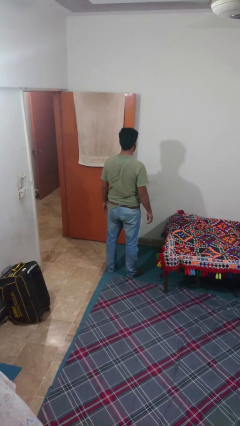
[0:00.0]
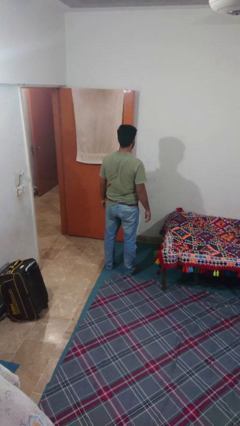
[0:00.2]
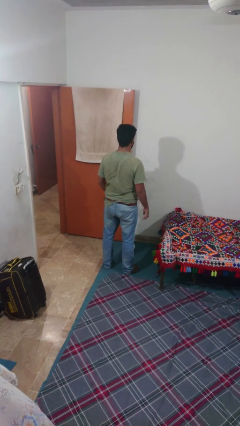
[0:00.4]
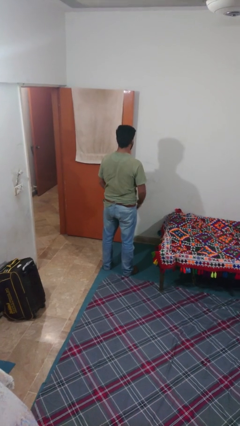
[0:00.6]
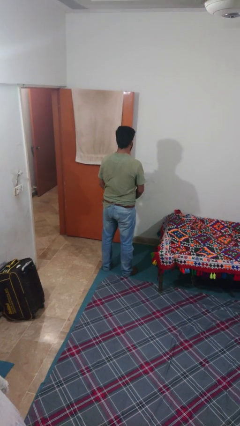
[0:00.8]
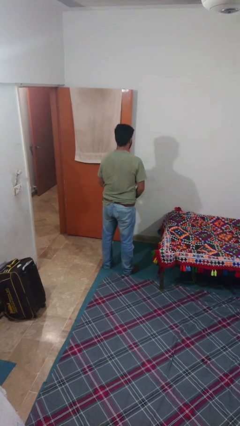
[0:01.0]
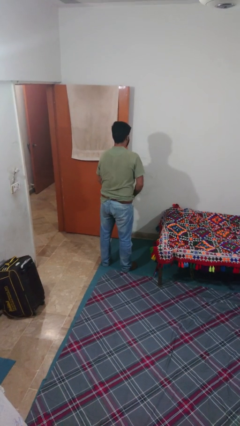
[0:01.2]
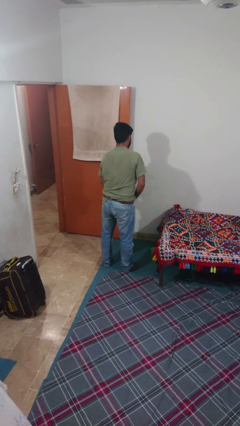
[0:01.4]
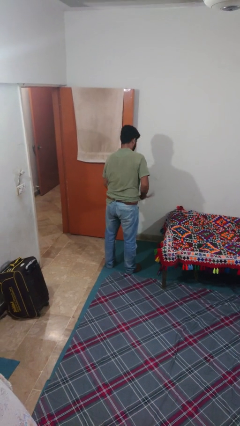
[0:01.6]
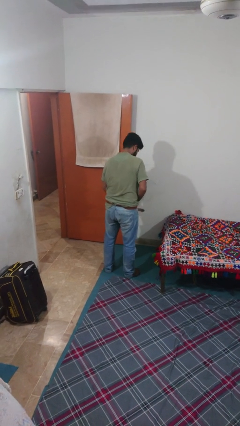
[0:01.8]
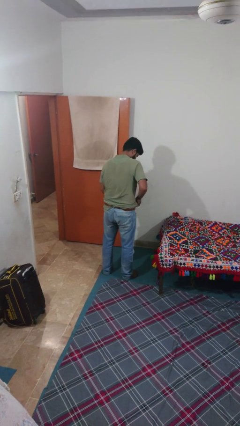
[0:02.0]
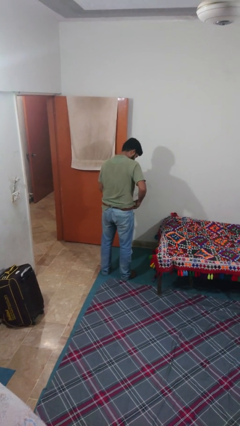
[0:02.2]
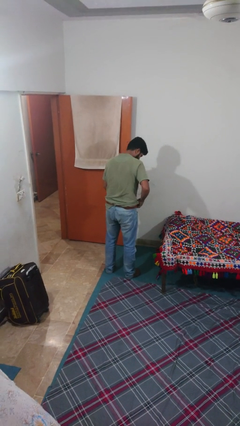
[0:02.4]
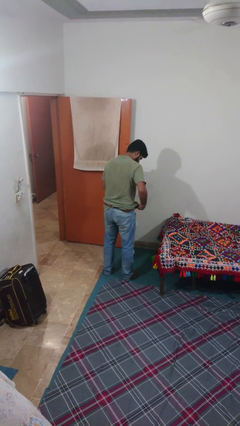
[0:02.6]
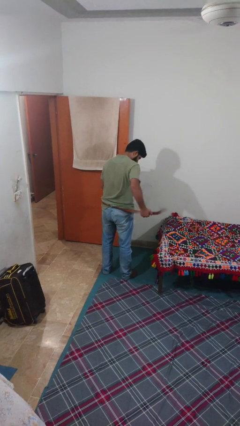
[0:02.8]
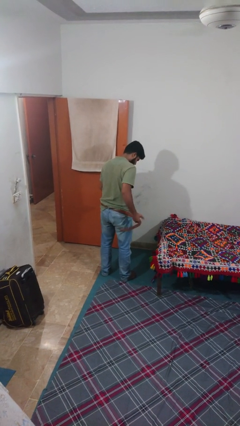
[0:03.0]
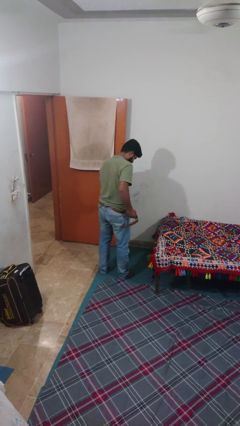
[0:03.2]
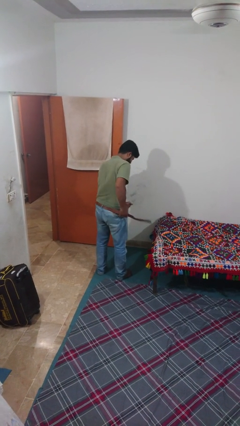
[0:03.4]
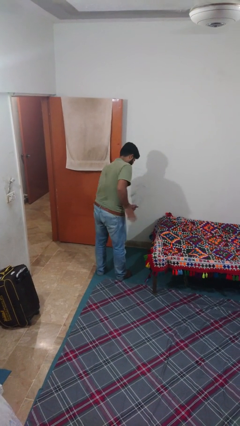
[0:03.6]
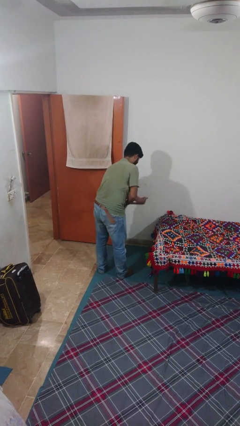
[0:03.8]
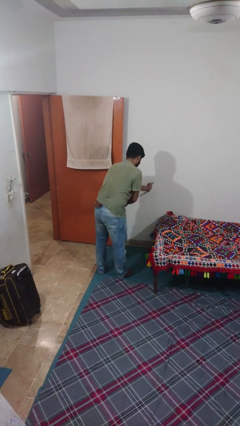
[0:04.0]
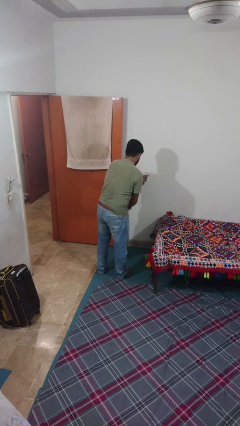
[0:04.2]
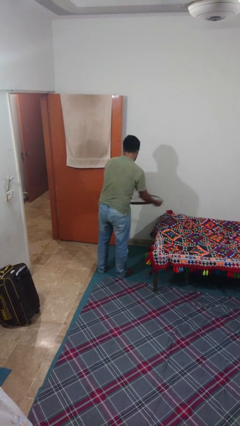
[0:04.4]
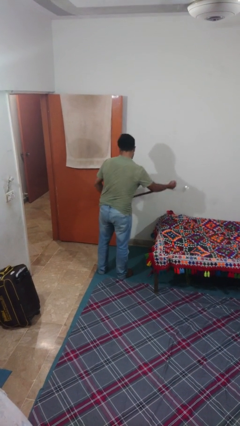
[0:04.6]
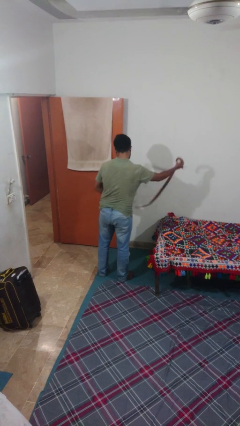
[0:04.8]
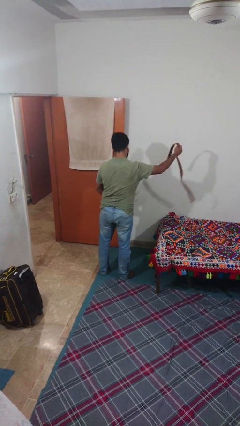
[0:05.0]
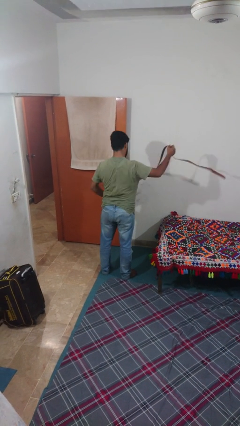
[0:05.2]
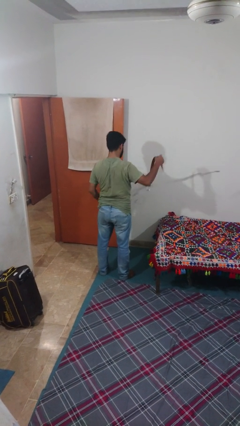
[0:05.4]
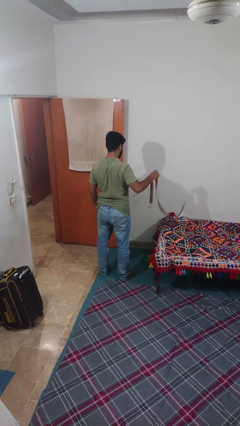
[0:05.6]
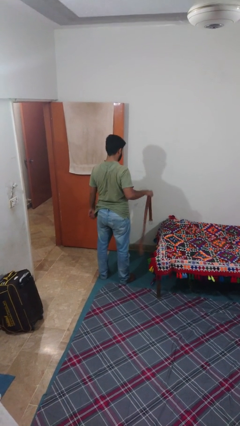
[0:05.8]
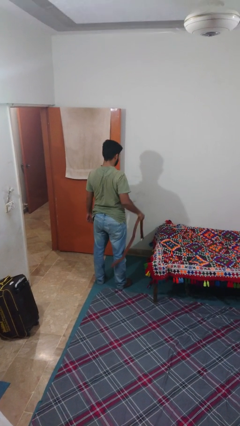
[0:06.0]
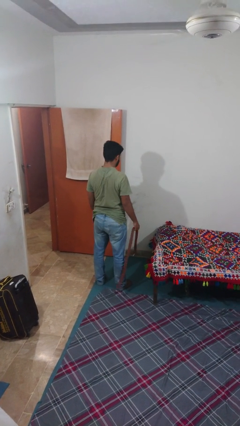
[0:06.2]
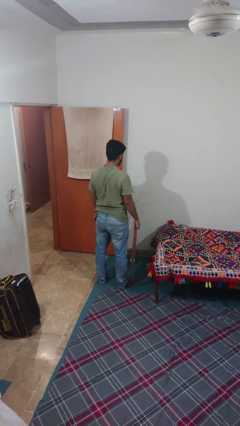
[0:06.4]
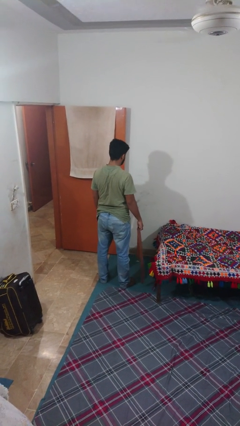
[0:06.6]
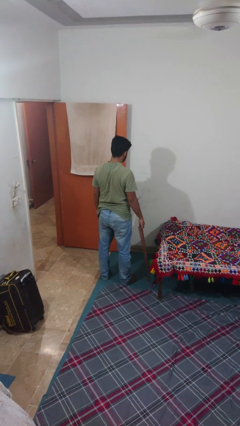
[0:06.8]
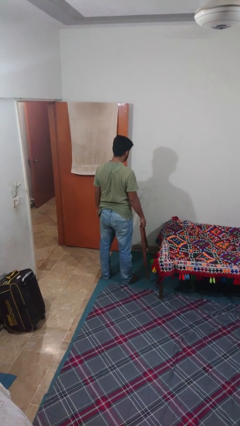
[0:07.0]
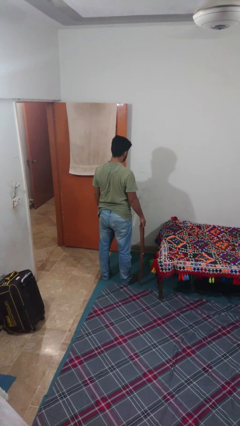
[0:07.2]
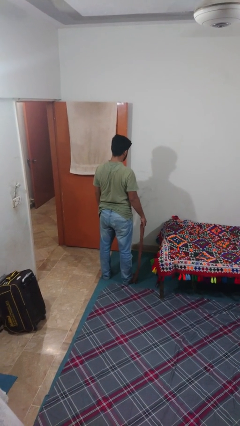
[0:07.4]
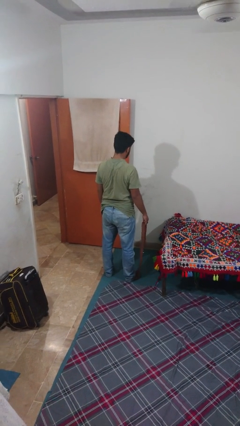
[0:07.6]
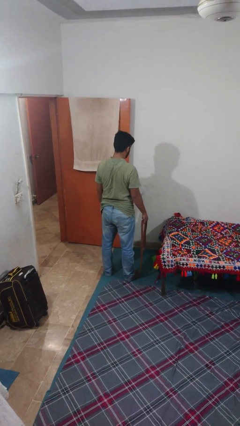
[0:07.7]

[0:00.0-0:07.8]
person takes off belt

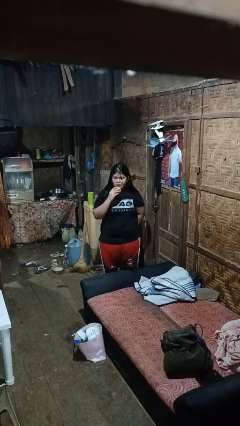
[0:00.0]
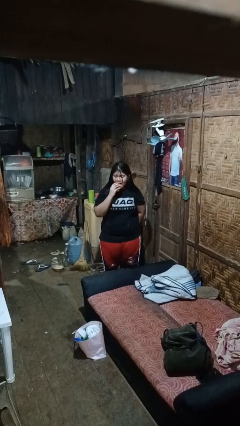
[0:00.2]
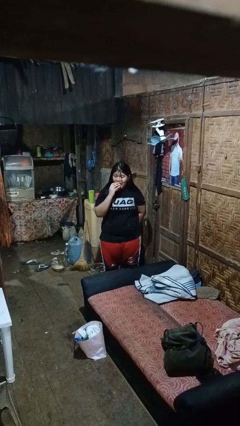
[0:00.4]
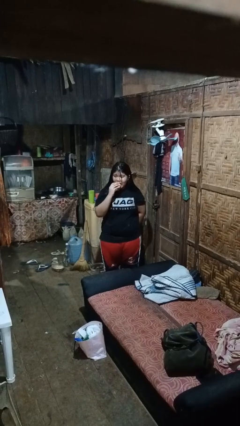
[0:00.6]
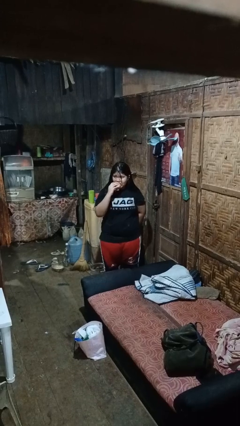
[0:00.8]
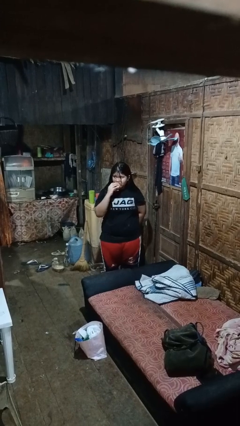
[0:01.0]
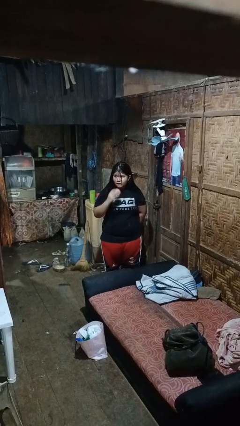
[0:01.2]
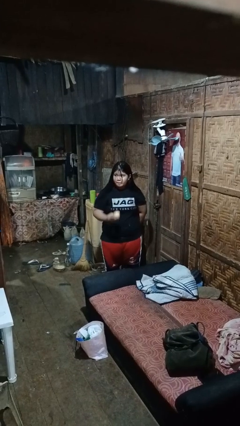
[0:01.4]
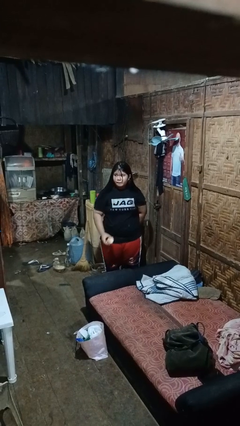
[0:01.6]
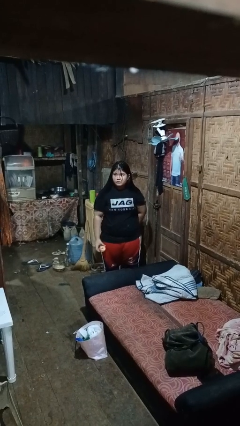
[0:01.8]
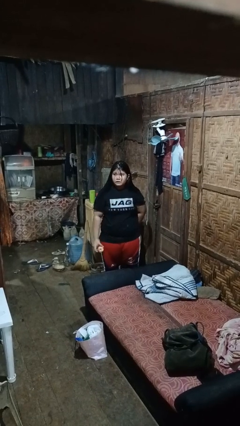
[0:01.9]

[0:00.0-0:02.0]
person eats apple

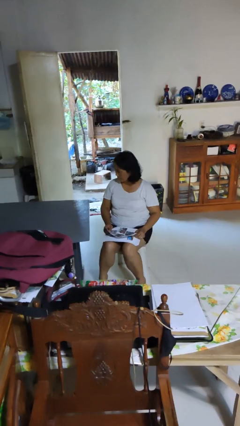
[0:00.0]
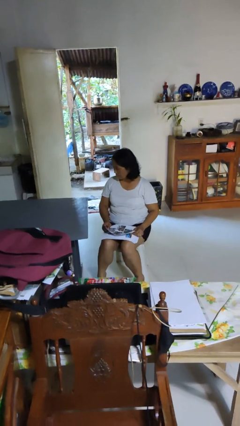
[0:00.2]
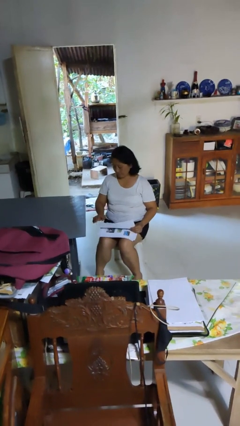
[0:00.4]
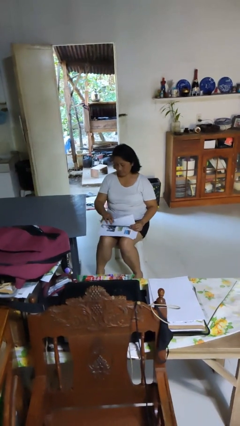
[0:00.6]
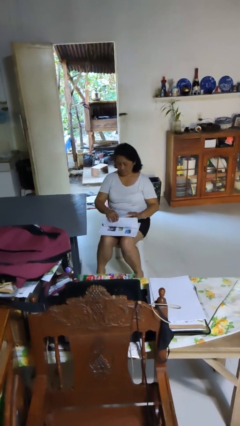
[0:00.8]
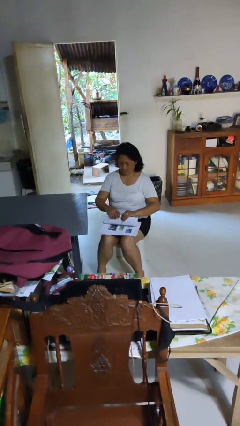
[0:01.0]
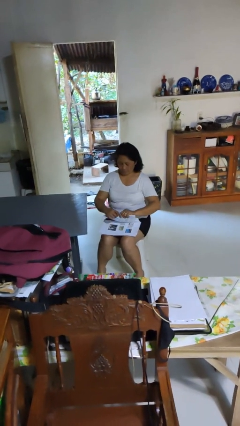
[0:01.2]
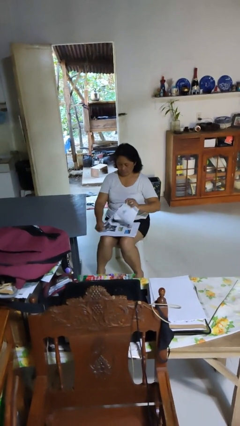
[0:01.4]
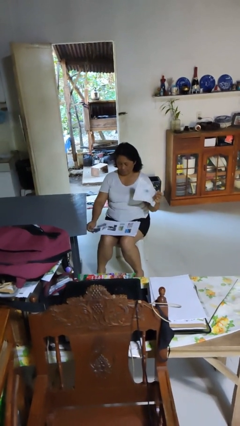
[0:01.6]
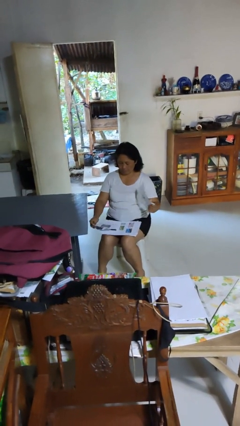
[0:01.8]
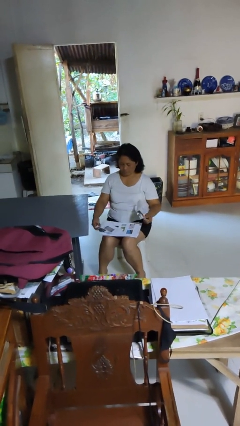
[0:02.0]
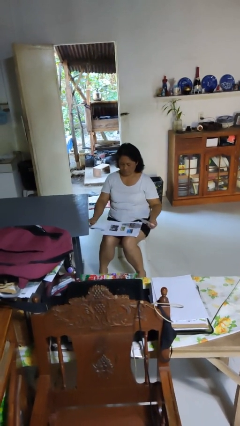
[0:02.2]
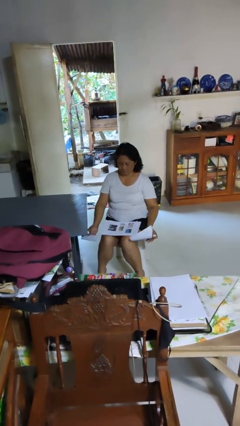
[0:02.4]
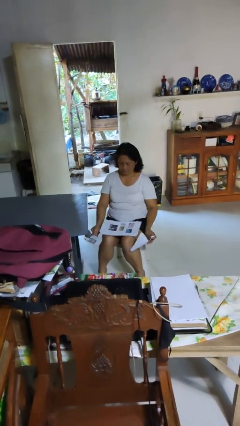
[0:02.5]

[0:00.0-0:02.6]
person tears paper

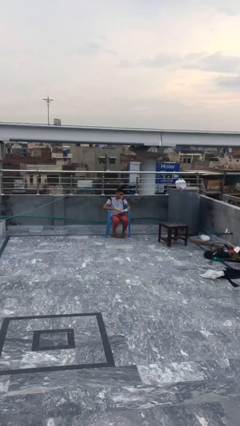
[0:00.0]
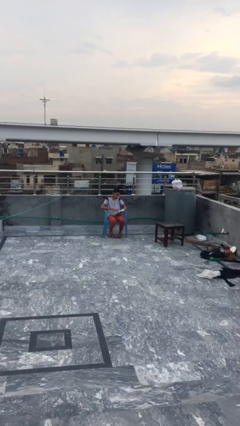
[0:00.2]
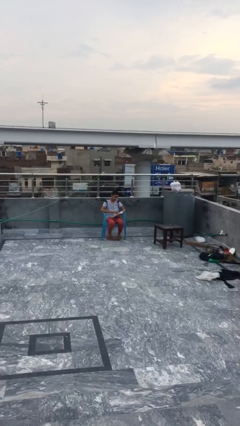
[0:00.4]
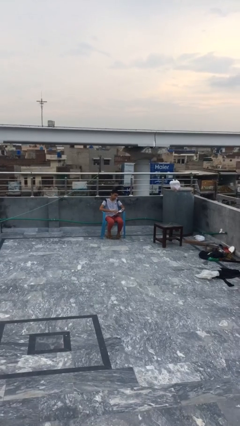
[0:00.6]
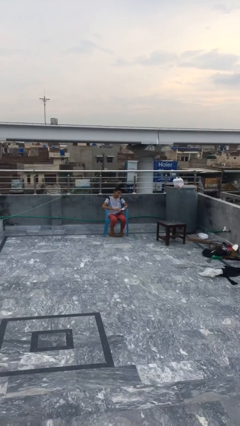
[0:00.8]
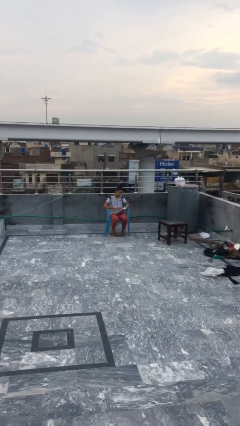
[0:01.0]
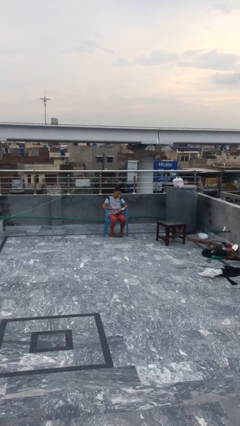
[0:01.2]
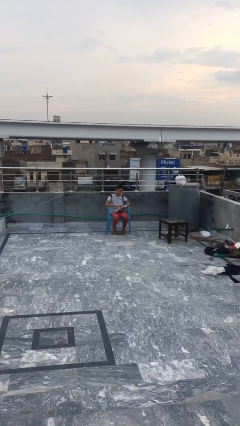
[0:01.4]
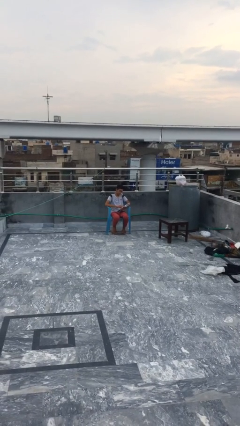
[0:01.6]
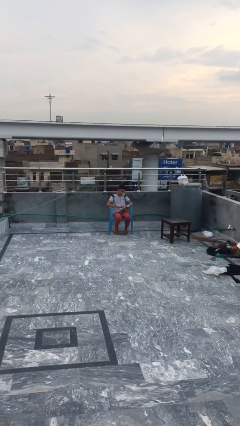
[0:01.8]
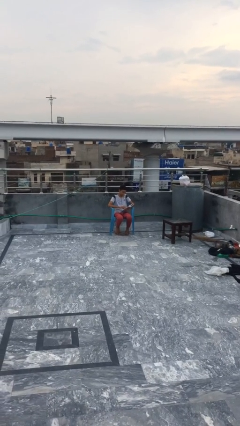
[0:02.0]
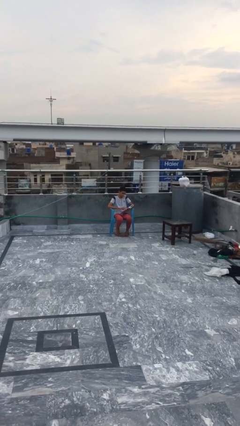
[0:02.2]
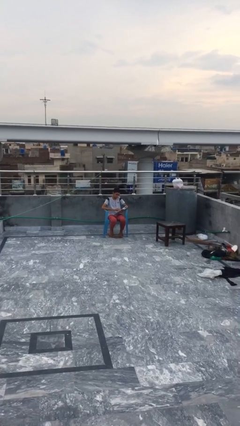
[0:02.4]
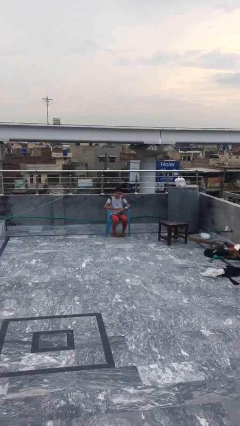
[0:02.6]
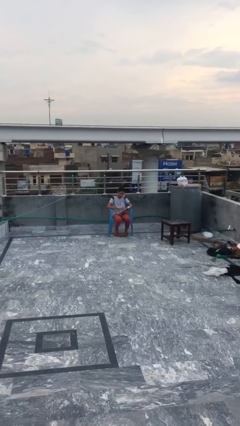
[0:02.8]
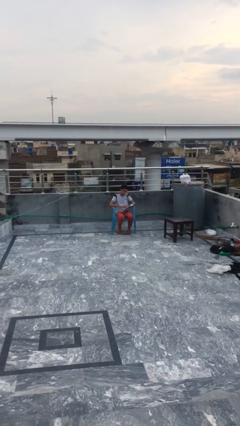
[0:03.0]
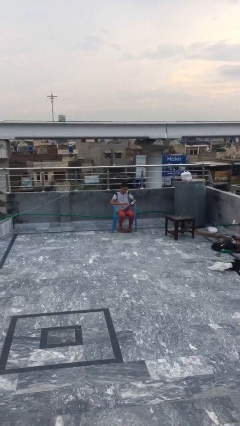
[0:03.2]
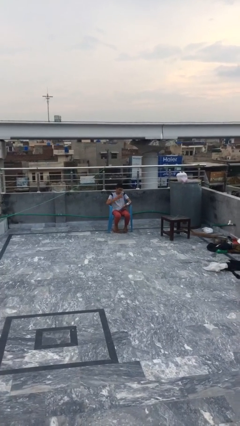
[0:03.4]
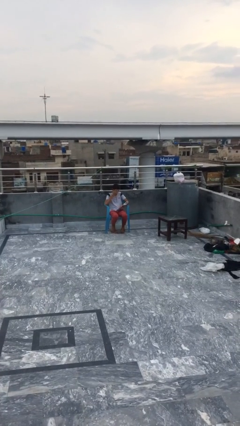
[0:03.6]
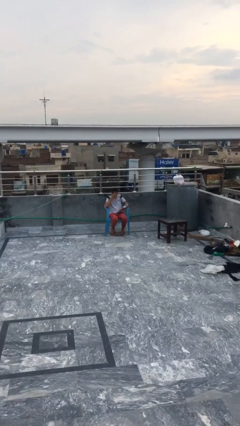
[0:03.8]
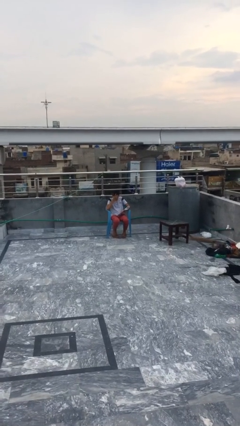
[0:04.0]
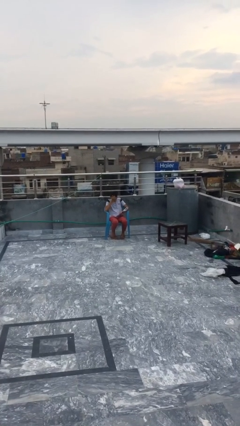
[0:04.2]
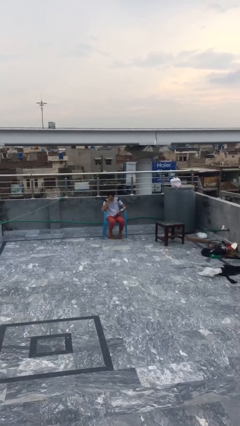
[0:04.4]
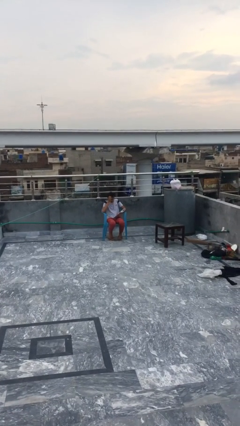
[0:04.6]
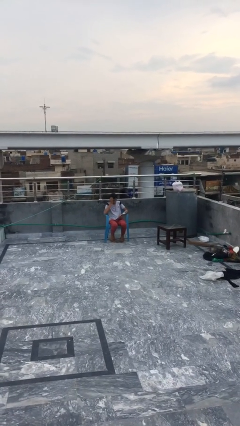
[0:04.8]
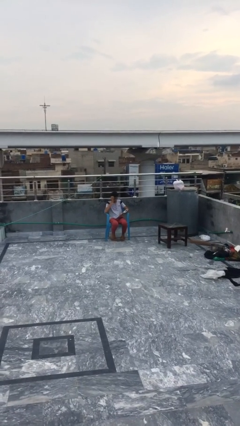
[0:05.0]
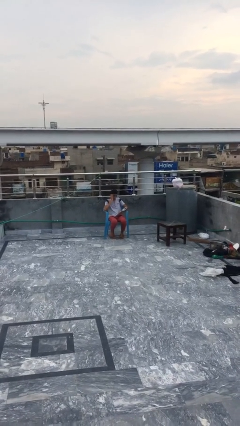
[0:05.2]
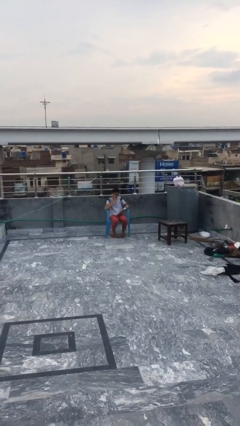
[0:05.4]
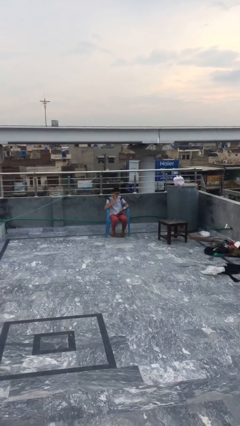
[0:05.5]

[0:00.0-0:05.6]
person reads document
